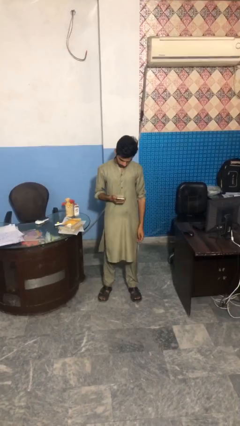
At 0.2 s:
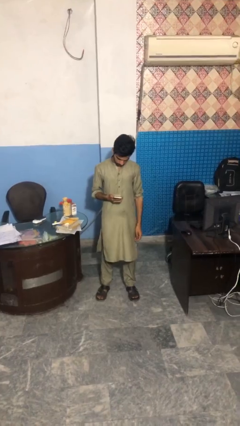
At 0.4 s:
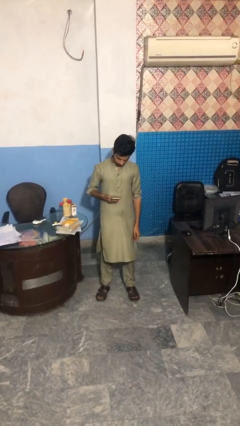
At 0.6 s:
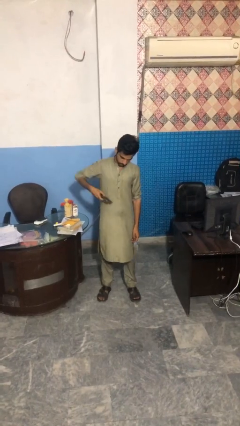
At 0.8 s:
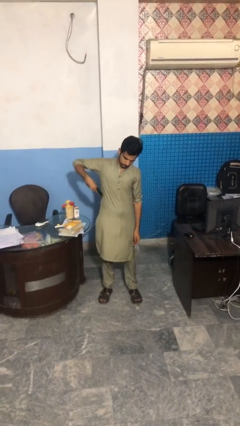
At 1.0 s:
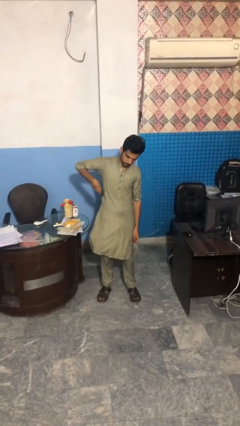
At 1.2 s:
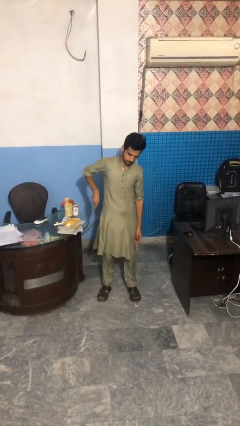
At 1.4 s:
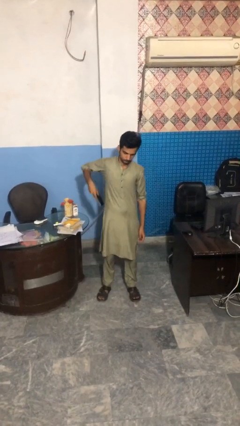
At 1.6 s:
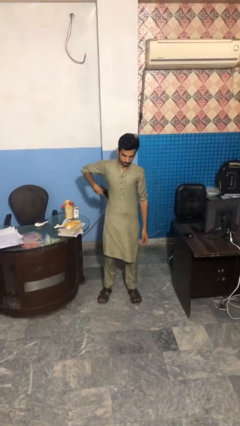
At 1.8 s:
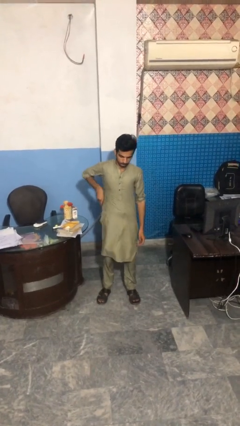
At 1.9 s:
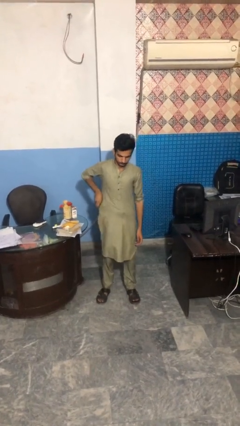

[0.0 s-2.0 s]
person puts phone into pocket

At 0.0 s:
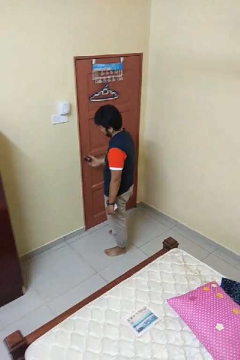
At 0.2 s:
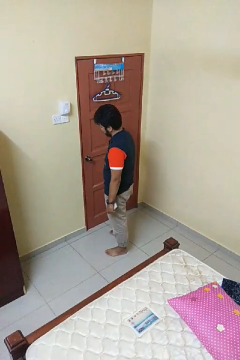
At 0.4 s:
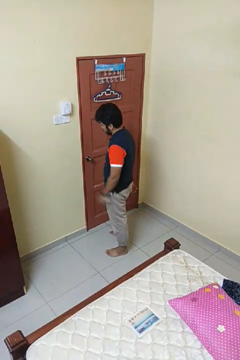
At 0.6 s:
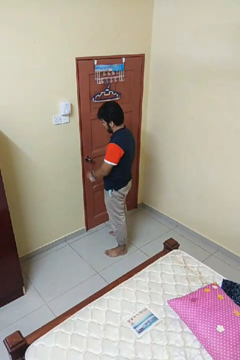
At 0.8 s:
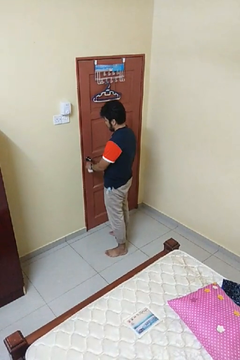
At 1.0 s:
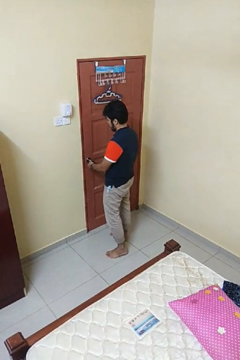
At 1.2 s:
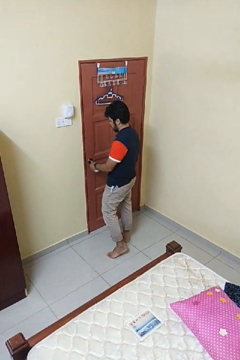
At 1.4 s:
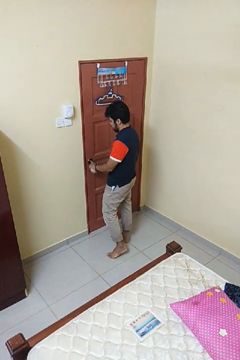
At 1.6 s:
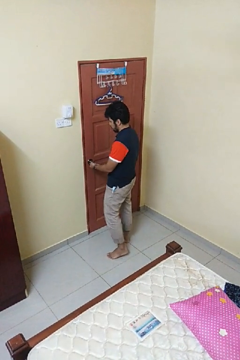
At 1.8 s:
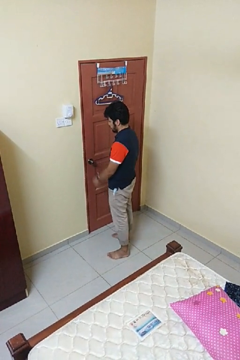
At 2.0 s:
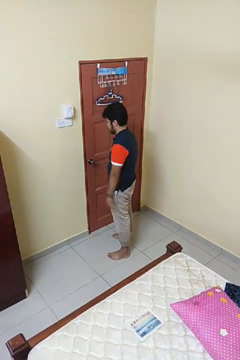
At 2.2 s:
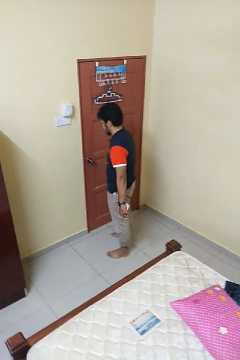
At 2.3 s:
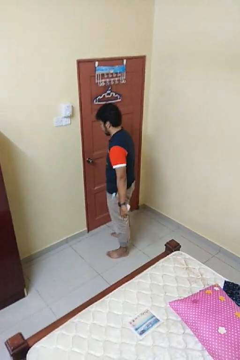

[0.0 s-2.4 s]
person locks door with keys

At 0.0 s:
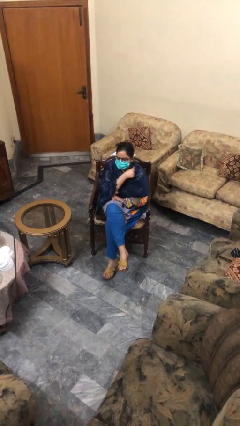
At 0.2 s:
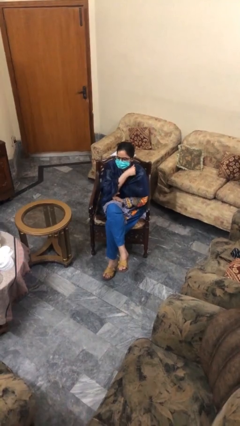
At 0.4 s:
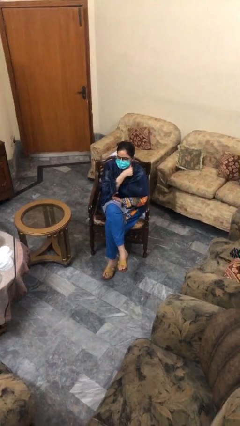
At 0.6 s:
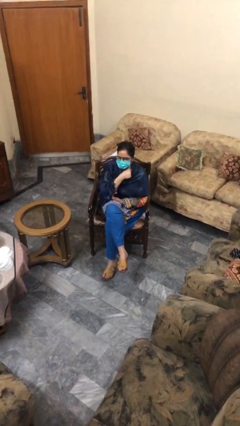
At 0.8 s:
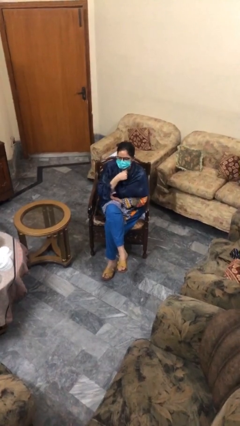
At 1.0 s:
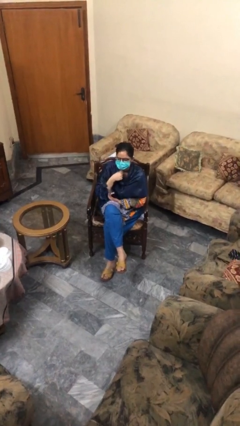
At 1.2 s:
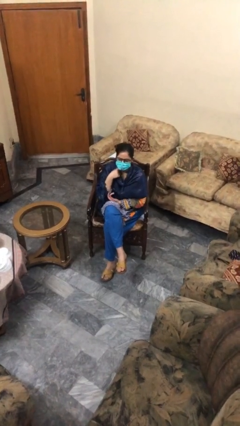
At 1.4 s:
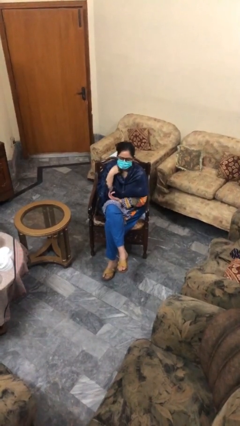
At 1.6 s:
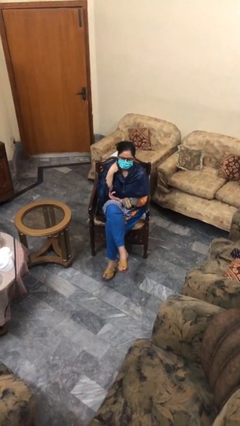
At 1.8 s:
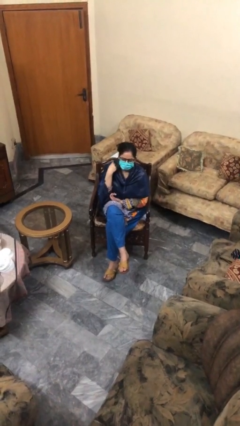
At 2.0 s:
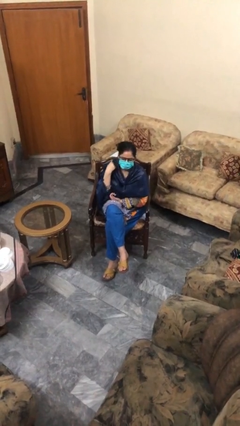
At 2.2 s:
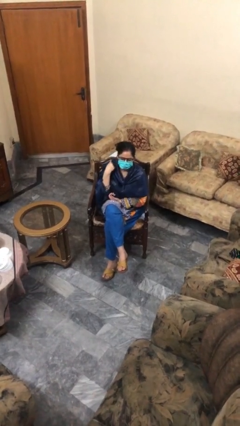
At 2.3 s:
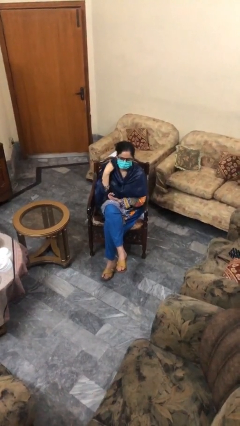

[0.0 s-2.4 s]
person gestures cut

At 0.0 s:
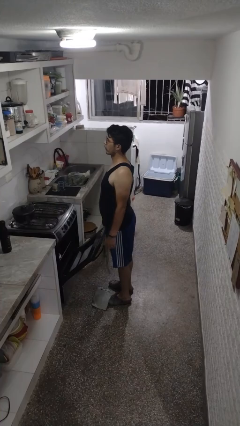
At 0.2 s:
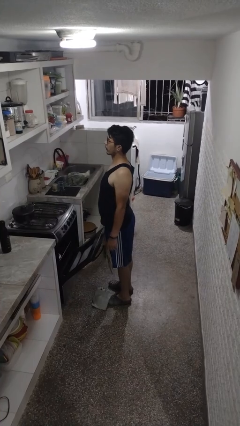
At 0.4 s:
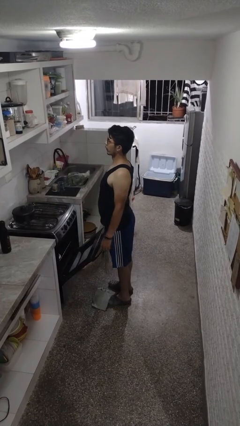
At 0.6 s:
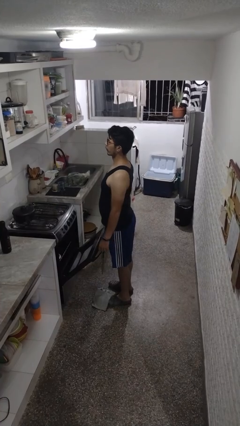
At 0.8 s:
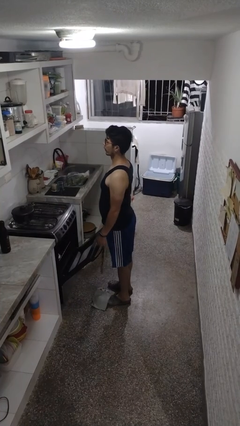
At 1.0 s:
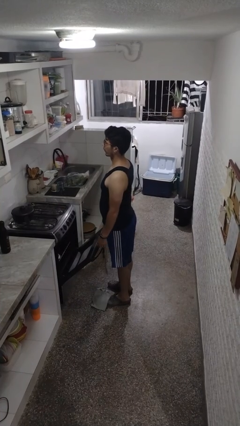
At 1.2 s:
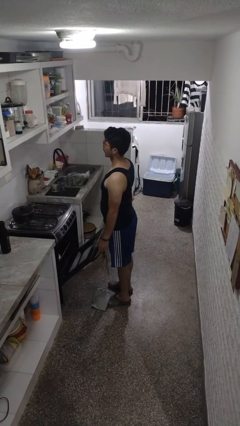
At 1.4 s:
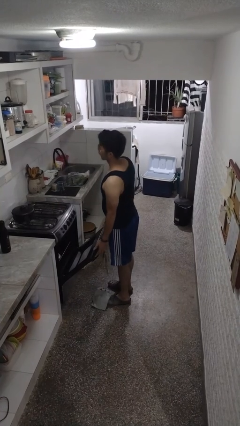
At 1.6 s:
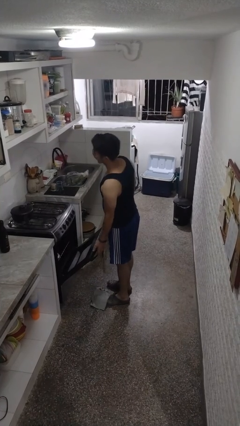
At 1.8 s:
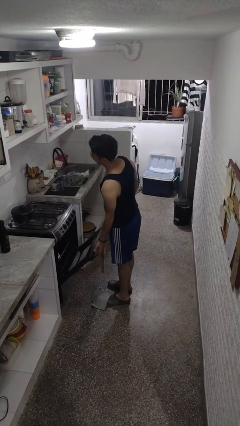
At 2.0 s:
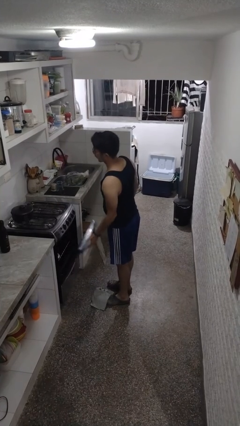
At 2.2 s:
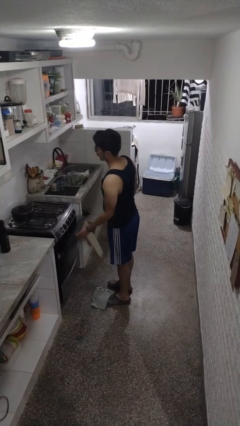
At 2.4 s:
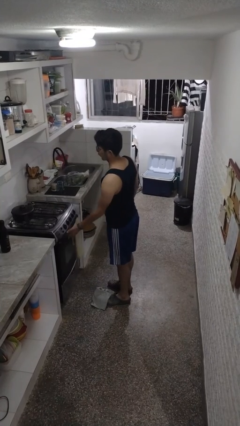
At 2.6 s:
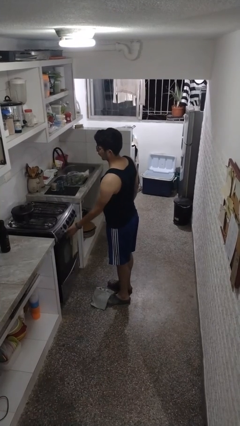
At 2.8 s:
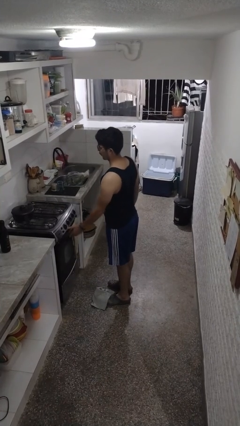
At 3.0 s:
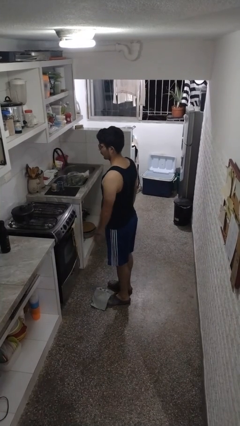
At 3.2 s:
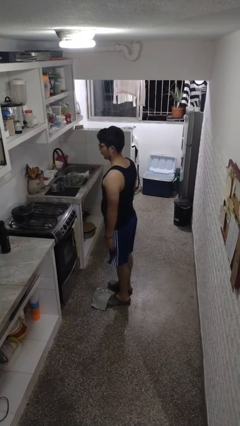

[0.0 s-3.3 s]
person closes oven door

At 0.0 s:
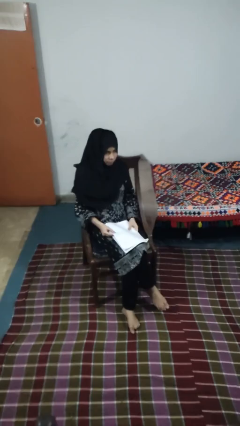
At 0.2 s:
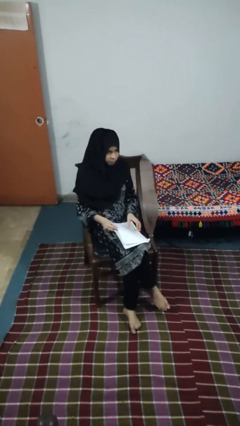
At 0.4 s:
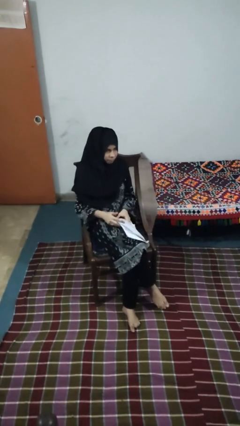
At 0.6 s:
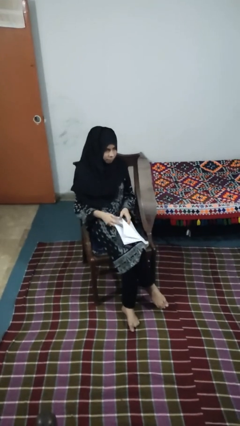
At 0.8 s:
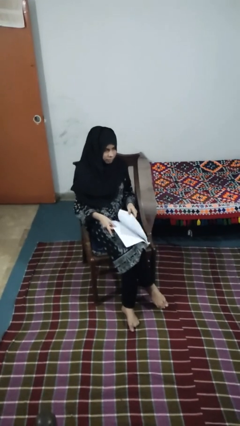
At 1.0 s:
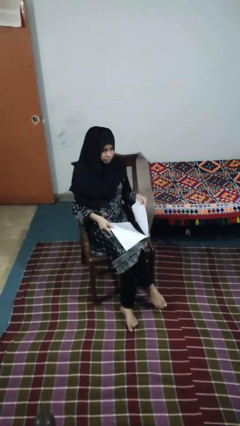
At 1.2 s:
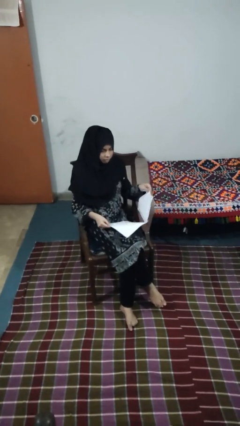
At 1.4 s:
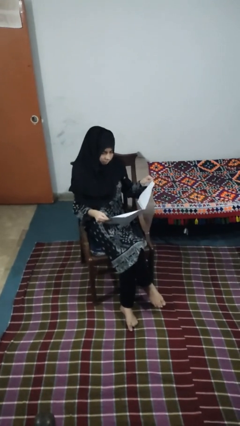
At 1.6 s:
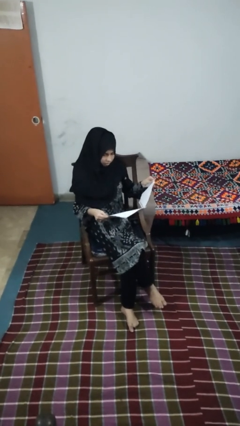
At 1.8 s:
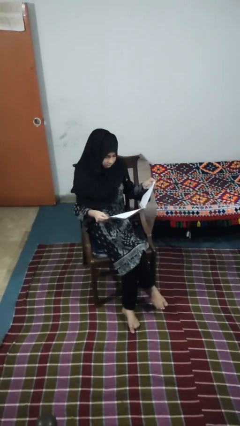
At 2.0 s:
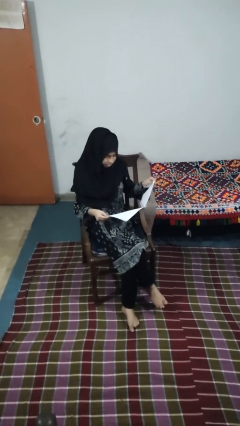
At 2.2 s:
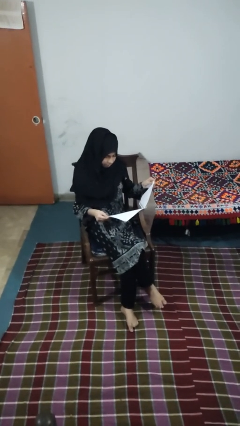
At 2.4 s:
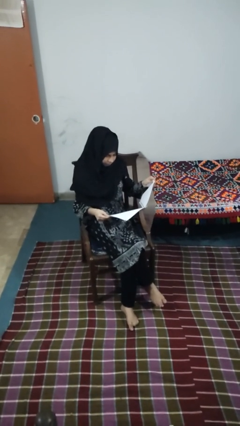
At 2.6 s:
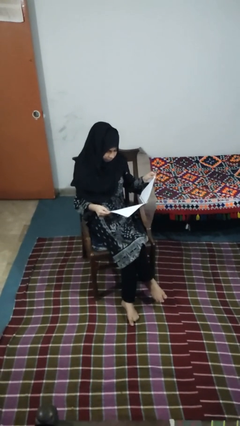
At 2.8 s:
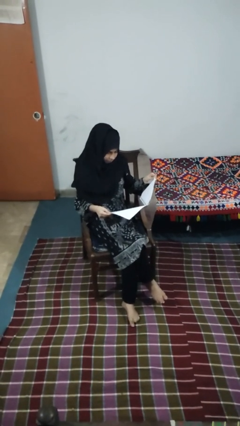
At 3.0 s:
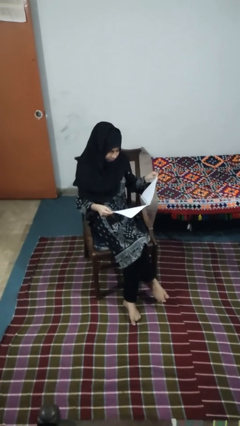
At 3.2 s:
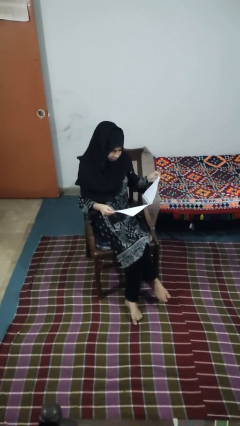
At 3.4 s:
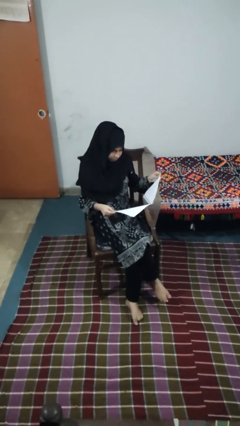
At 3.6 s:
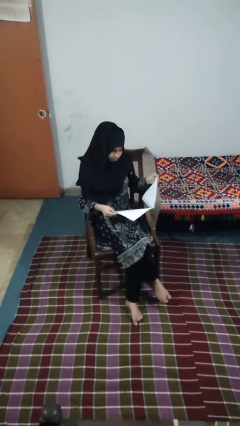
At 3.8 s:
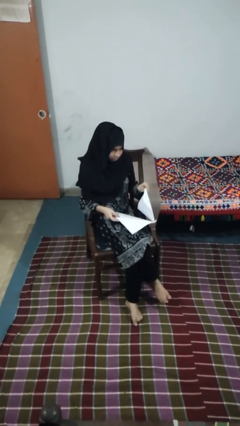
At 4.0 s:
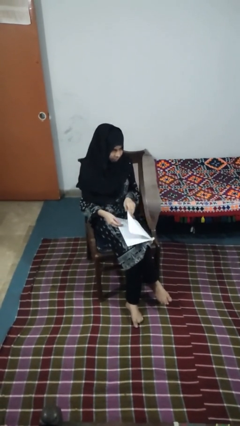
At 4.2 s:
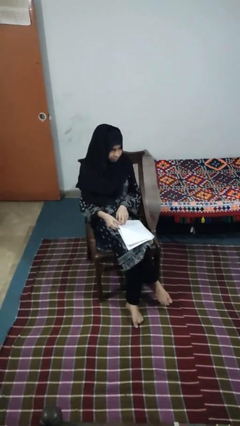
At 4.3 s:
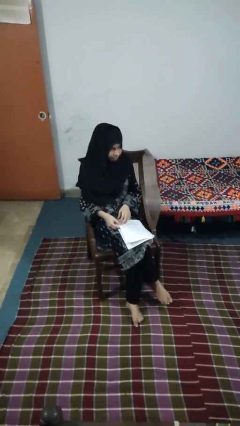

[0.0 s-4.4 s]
person reads newspaper

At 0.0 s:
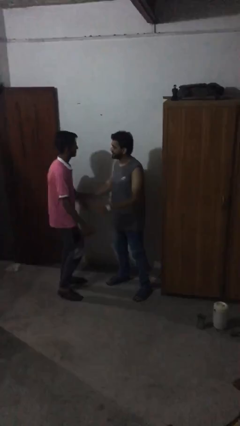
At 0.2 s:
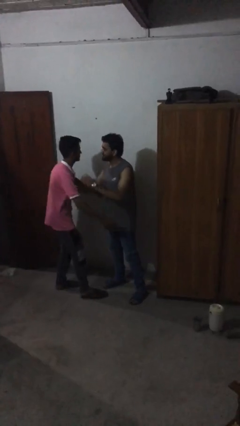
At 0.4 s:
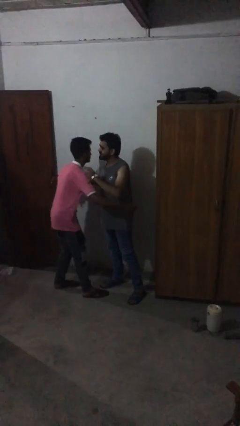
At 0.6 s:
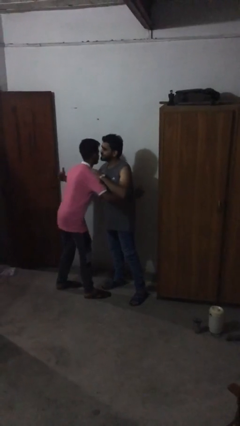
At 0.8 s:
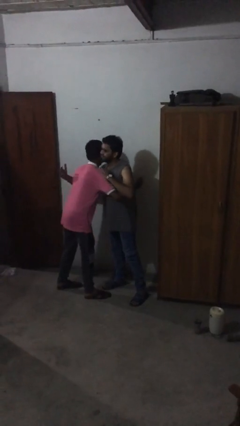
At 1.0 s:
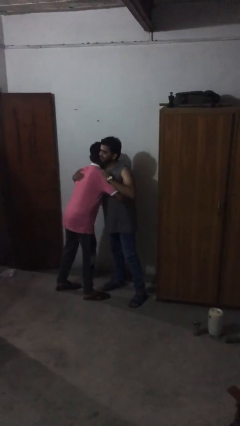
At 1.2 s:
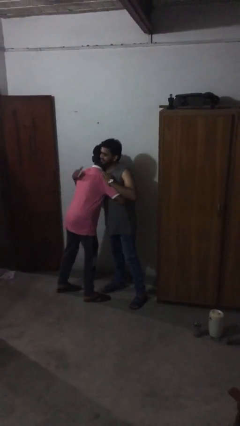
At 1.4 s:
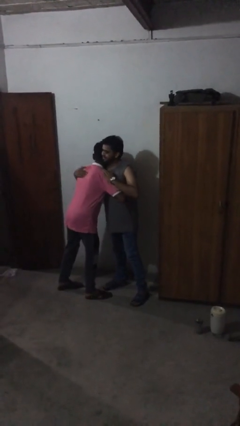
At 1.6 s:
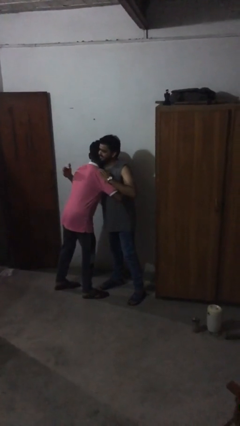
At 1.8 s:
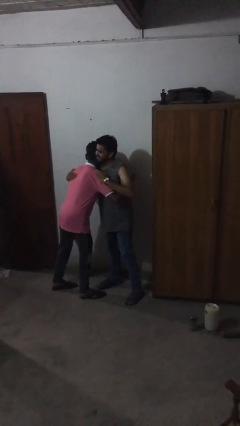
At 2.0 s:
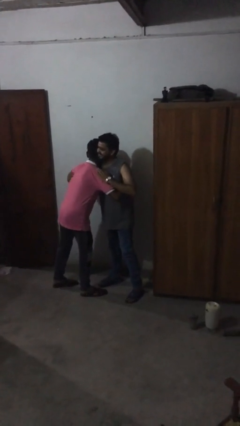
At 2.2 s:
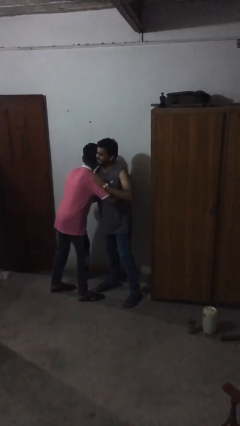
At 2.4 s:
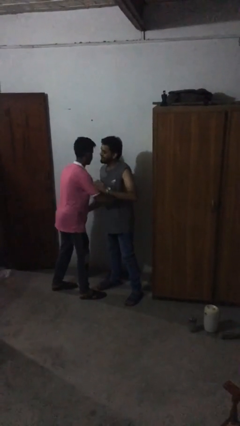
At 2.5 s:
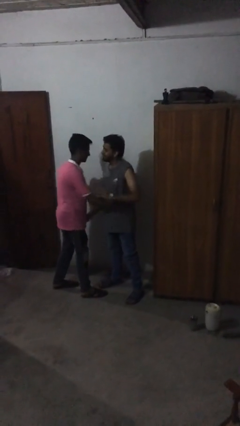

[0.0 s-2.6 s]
person embraces person

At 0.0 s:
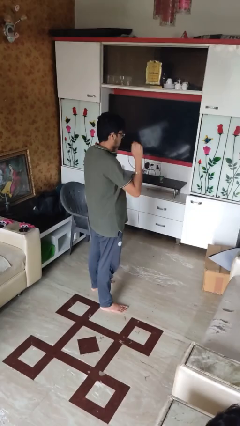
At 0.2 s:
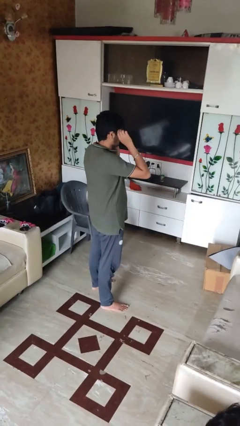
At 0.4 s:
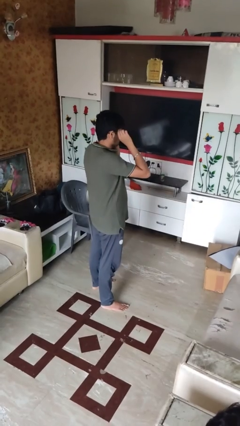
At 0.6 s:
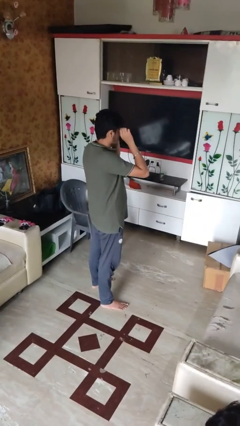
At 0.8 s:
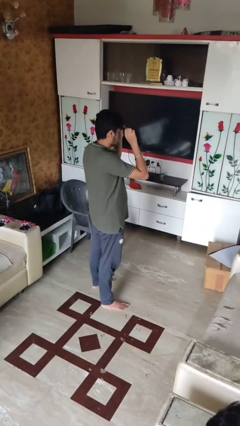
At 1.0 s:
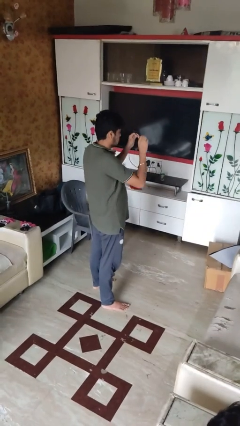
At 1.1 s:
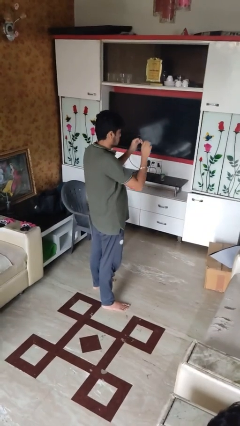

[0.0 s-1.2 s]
person takes off glasses
